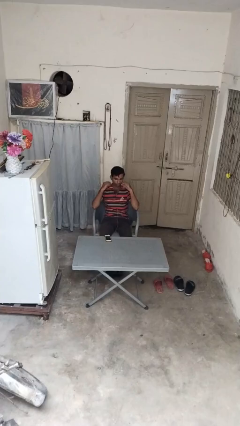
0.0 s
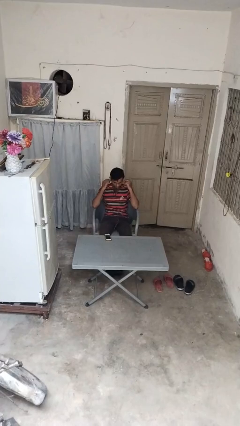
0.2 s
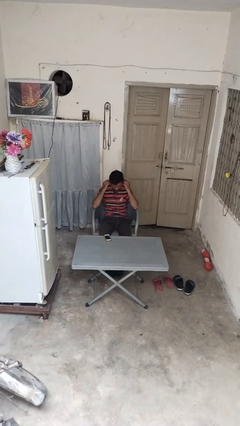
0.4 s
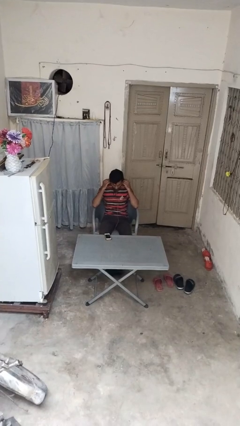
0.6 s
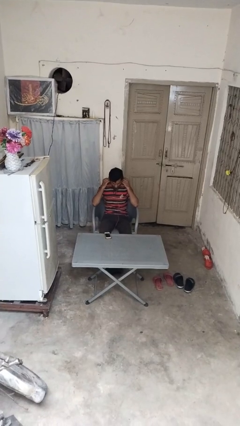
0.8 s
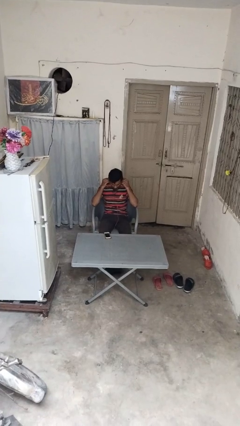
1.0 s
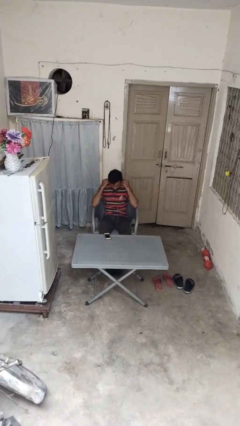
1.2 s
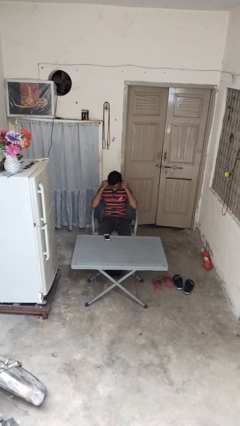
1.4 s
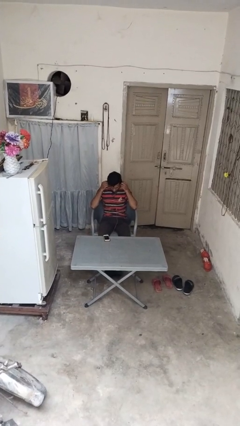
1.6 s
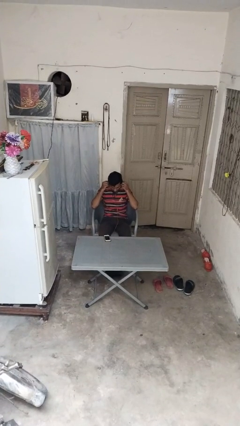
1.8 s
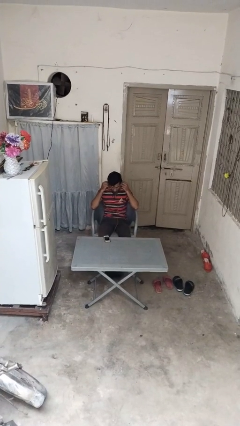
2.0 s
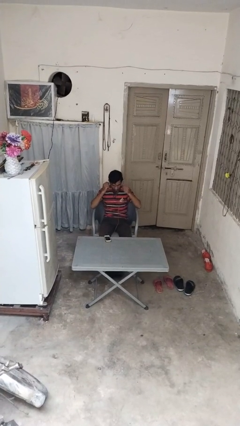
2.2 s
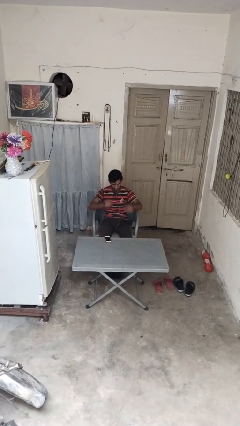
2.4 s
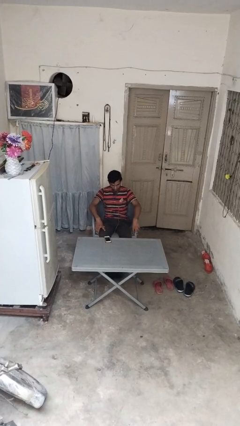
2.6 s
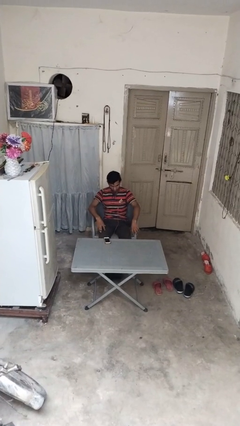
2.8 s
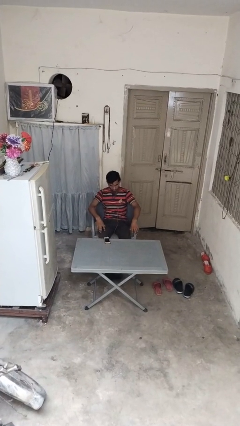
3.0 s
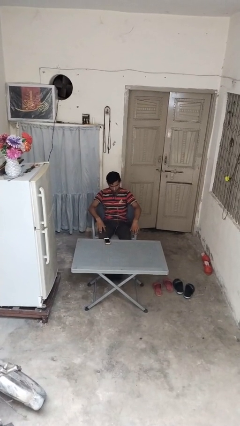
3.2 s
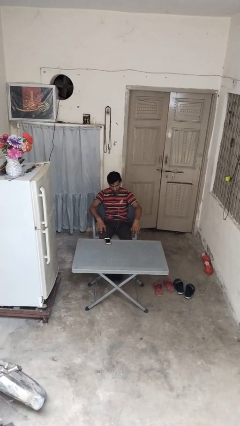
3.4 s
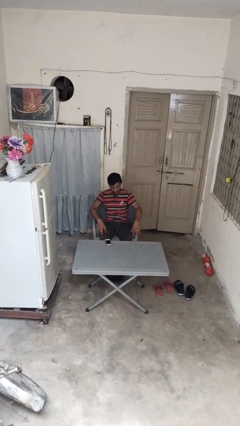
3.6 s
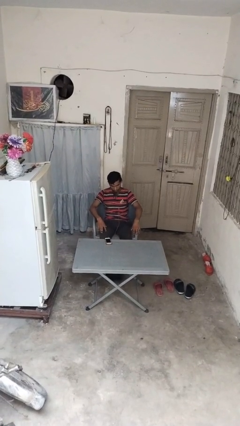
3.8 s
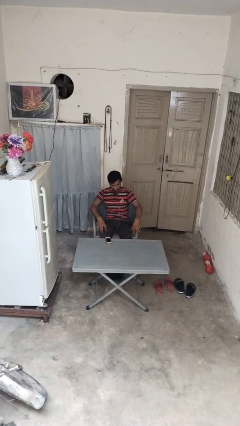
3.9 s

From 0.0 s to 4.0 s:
person puts on headphones

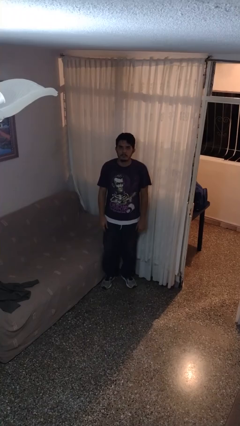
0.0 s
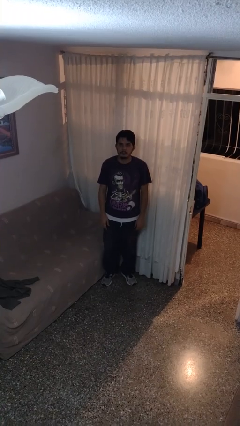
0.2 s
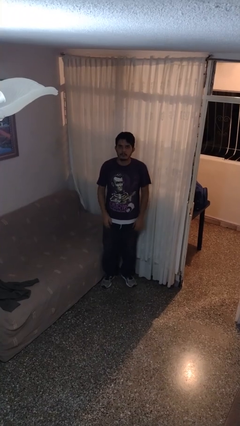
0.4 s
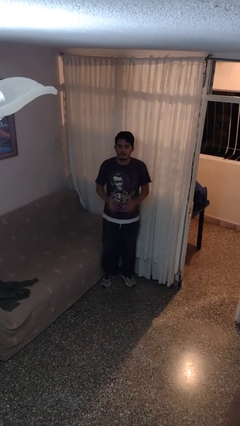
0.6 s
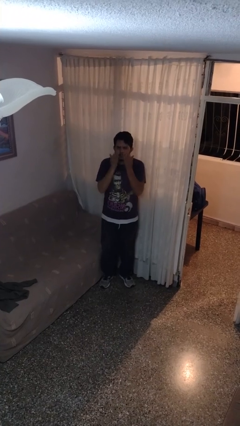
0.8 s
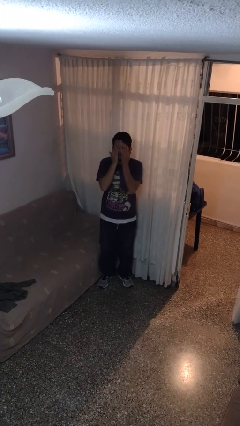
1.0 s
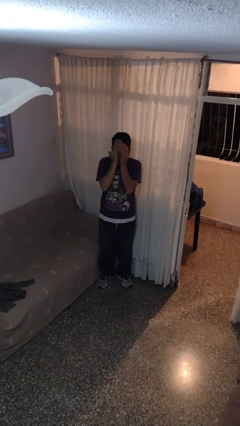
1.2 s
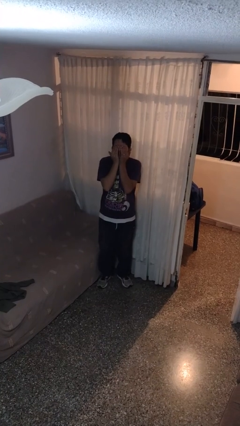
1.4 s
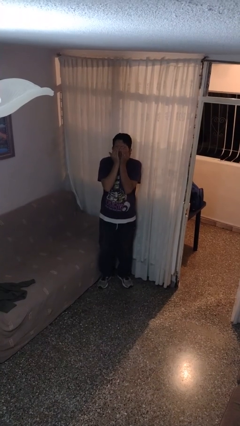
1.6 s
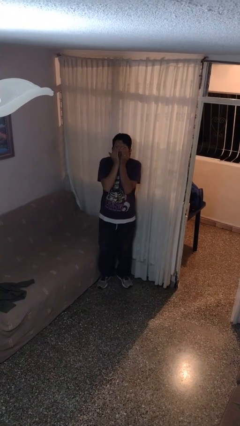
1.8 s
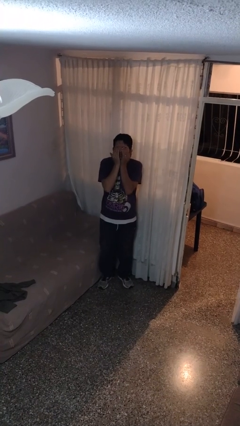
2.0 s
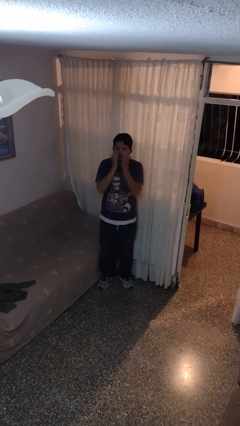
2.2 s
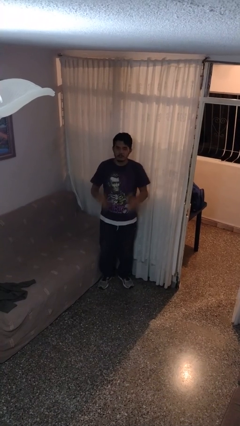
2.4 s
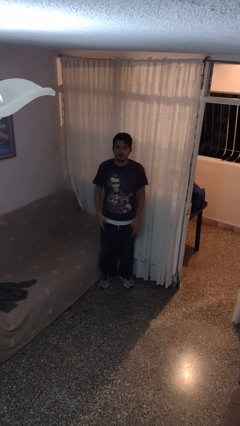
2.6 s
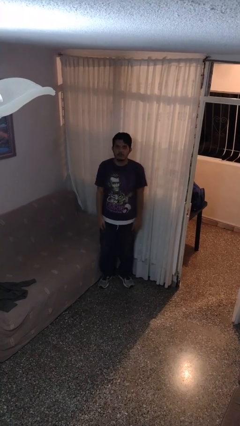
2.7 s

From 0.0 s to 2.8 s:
person rubs eyes

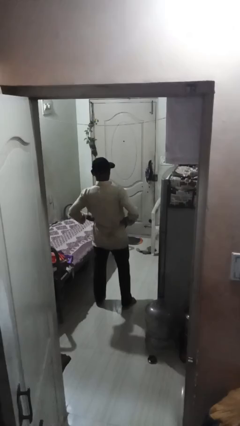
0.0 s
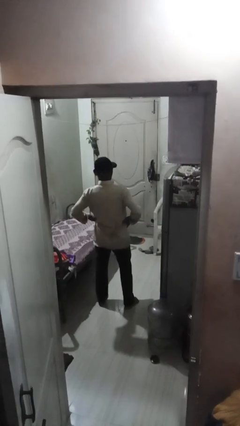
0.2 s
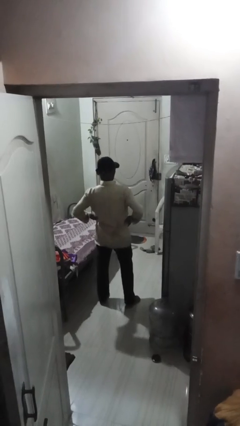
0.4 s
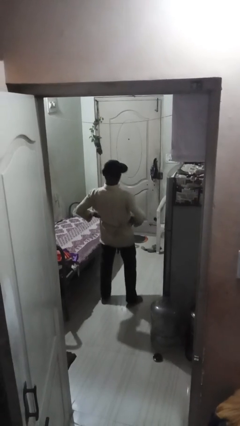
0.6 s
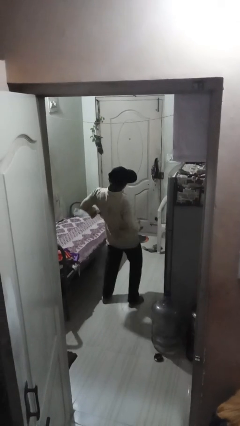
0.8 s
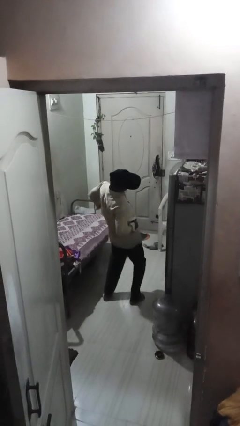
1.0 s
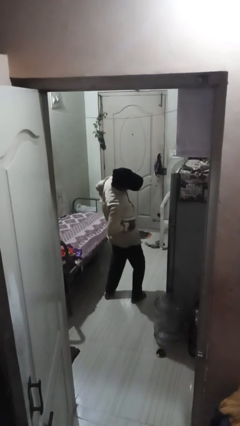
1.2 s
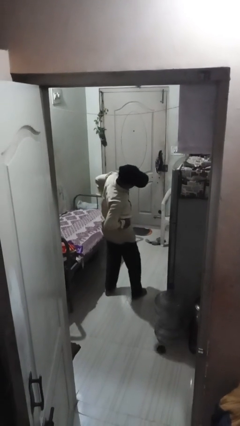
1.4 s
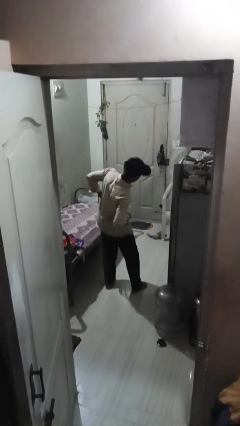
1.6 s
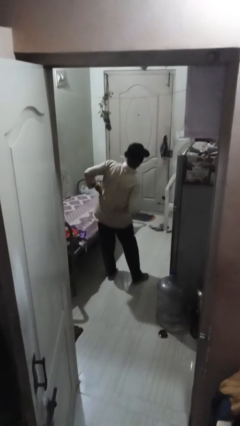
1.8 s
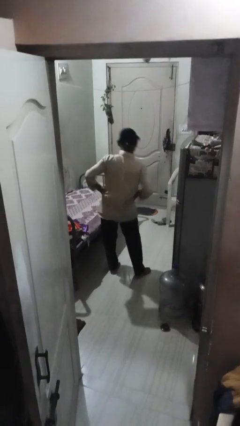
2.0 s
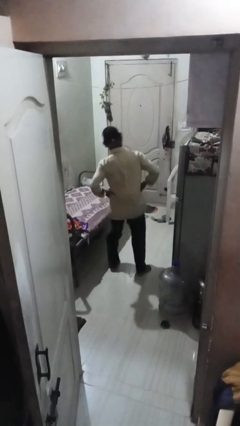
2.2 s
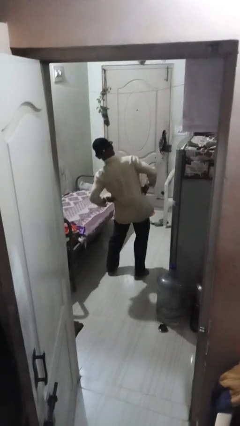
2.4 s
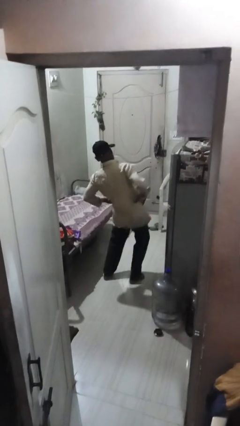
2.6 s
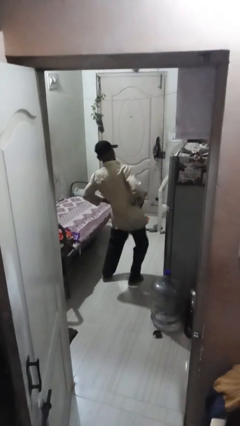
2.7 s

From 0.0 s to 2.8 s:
person wiggles hips

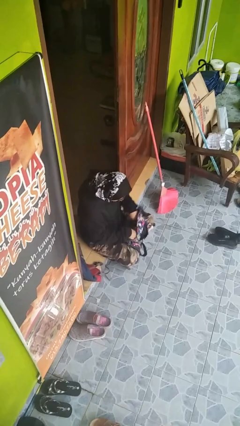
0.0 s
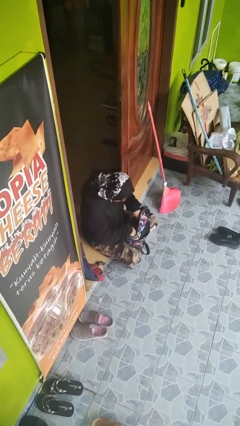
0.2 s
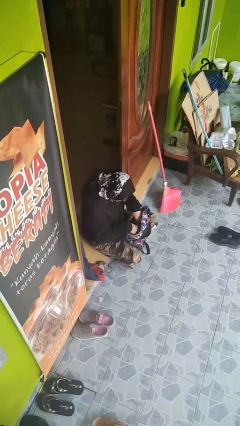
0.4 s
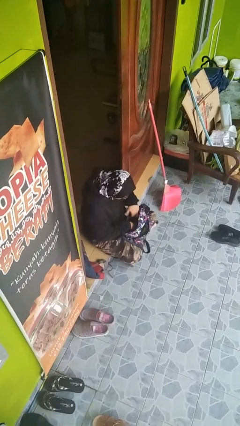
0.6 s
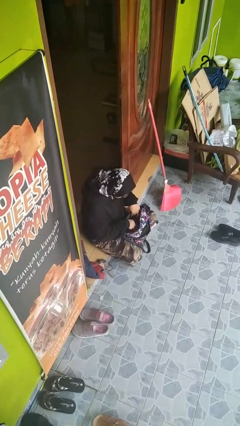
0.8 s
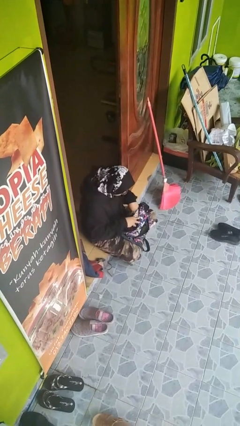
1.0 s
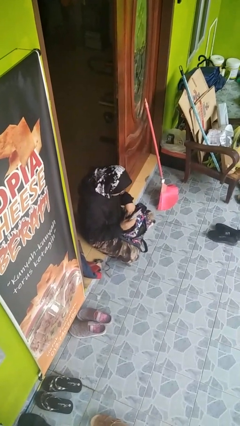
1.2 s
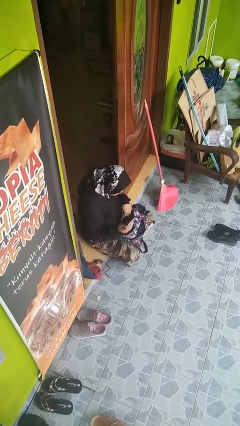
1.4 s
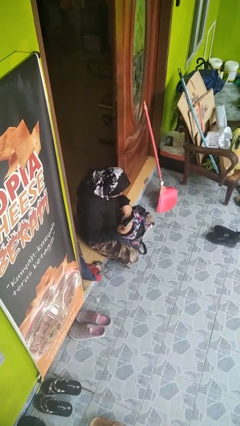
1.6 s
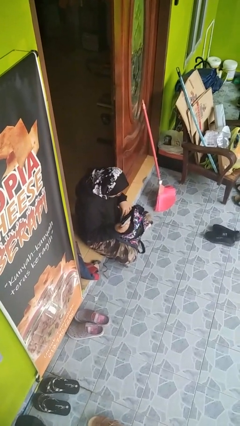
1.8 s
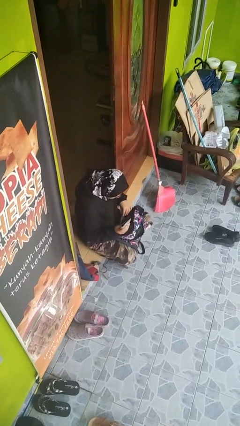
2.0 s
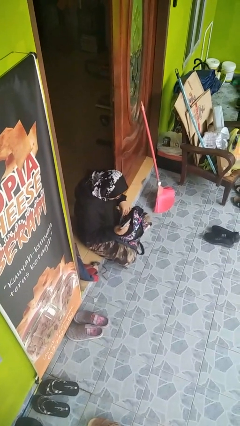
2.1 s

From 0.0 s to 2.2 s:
person takes object from purse

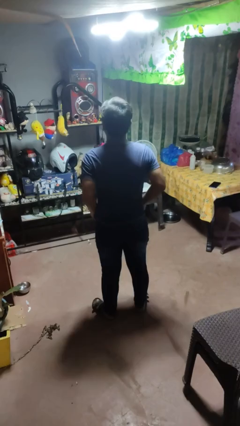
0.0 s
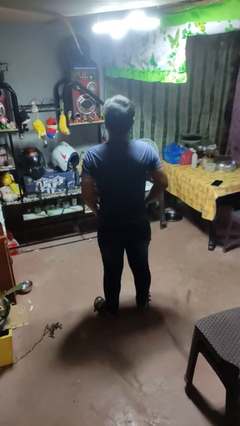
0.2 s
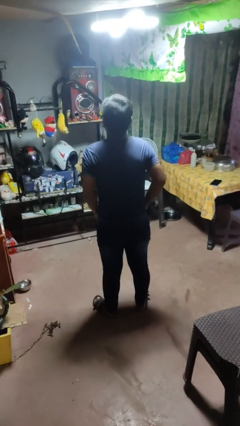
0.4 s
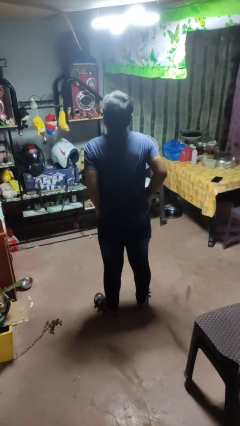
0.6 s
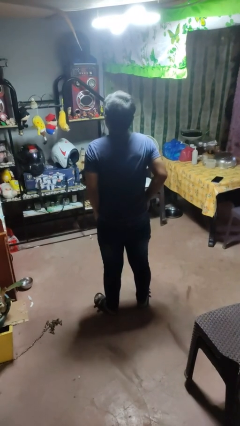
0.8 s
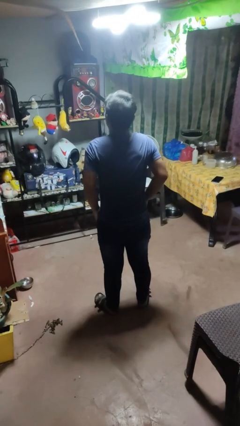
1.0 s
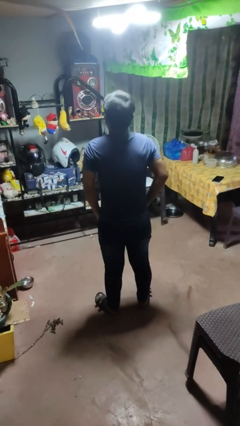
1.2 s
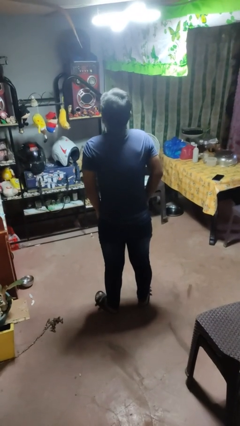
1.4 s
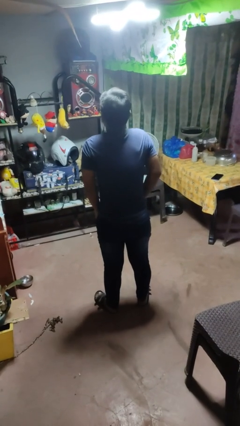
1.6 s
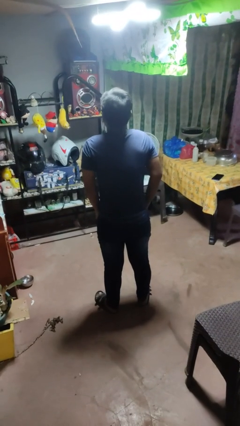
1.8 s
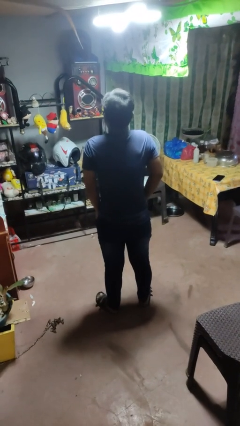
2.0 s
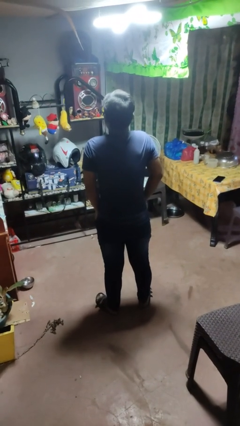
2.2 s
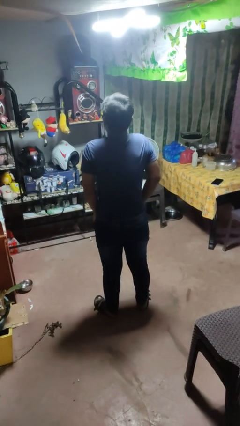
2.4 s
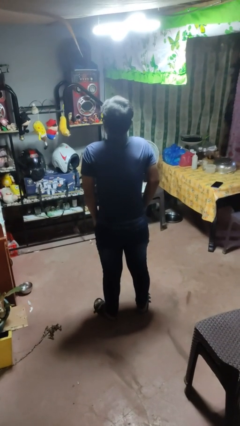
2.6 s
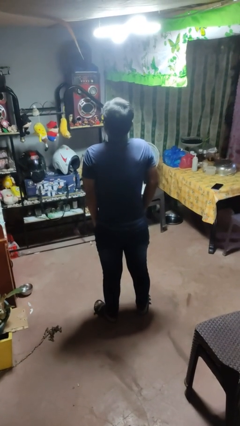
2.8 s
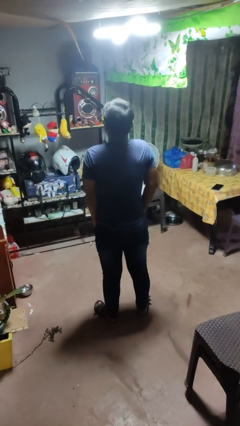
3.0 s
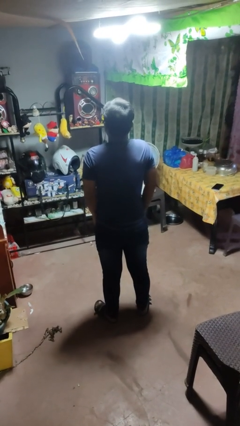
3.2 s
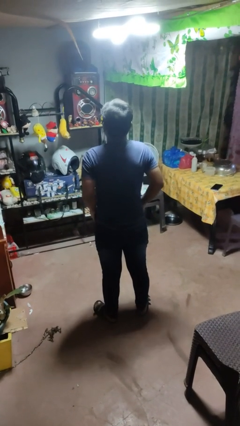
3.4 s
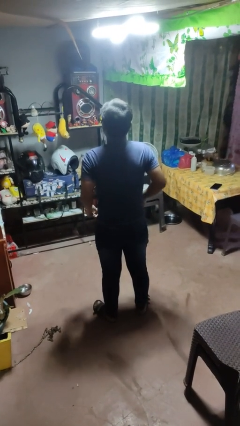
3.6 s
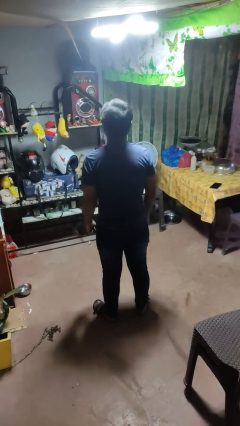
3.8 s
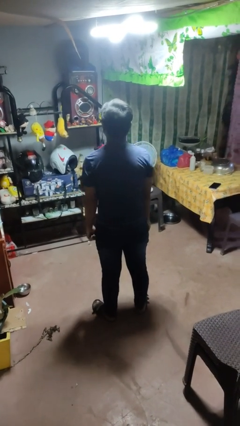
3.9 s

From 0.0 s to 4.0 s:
person puts hands in back pockets

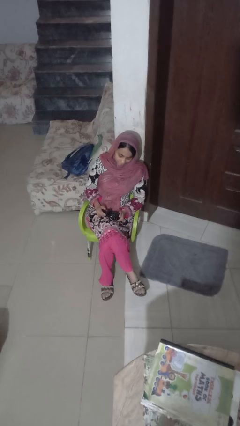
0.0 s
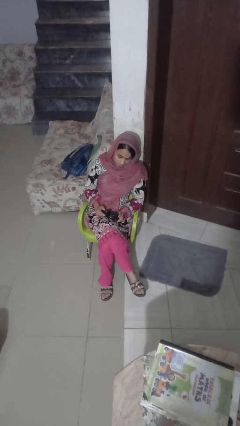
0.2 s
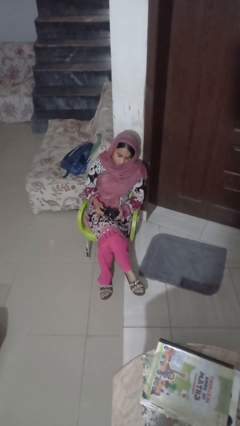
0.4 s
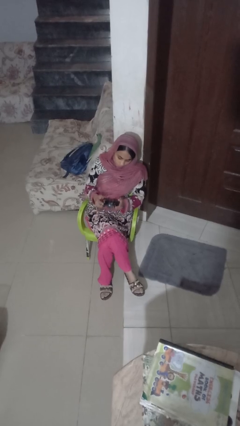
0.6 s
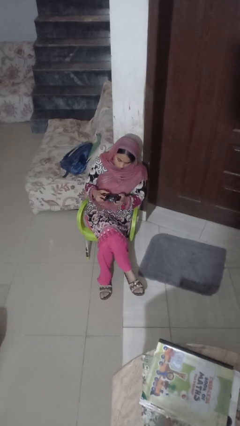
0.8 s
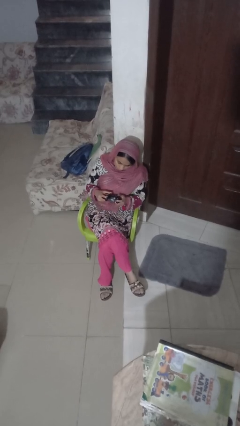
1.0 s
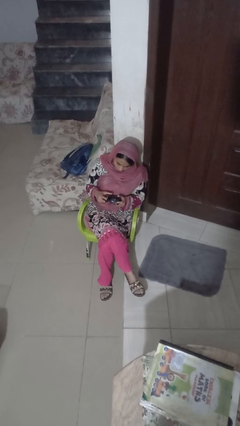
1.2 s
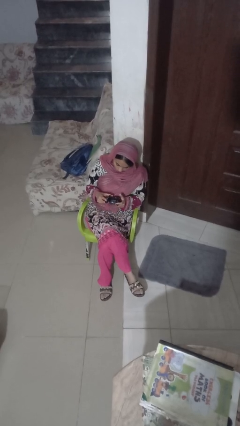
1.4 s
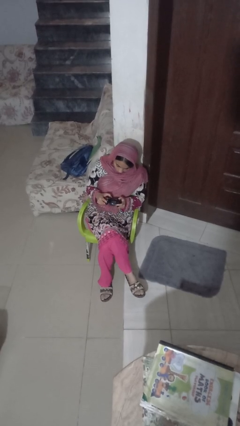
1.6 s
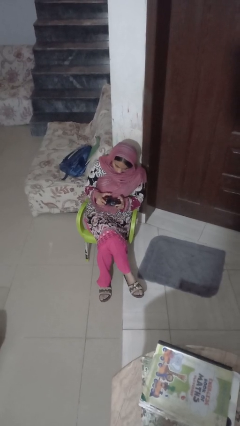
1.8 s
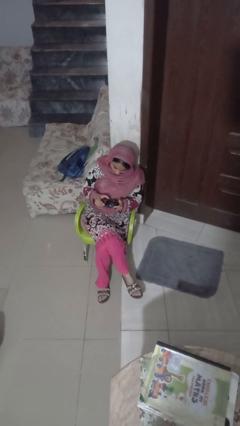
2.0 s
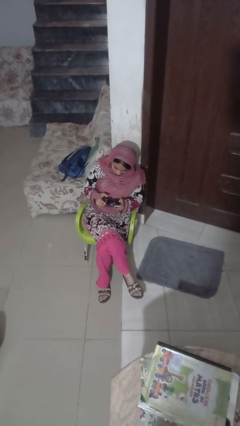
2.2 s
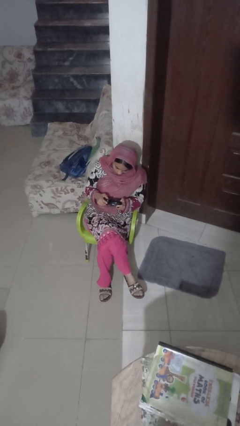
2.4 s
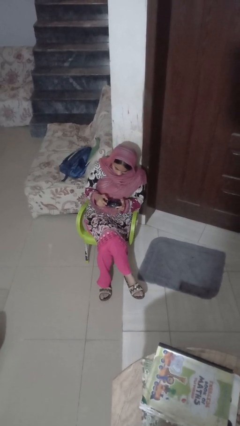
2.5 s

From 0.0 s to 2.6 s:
person interacts with handheld game
